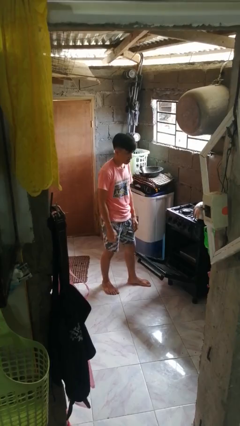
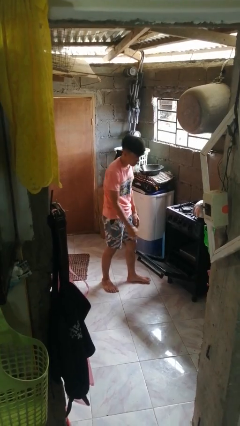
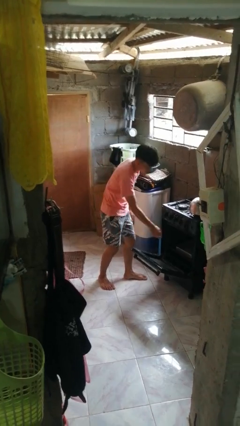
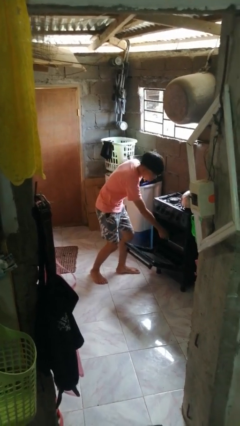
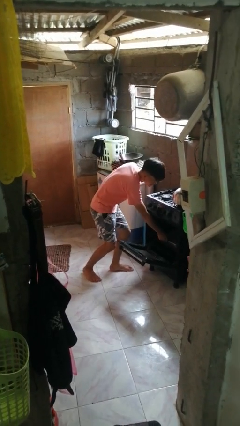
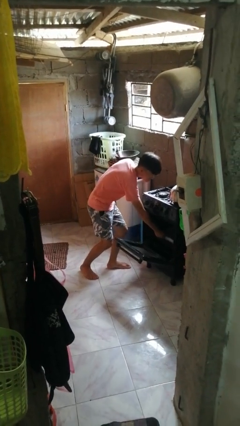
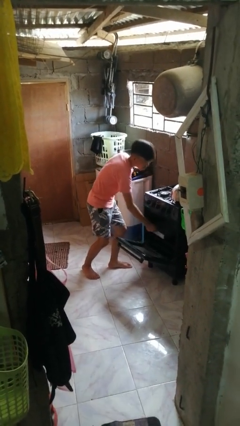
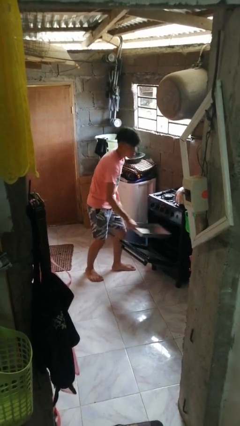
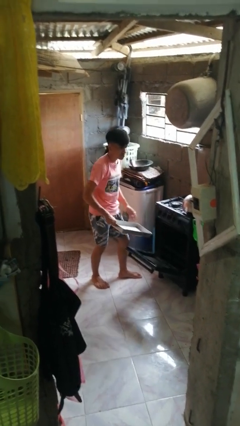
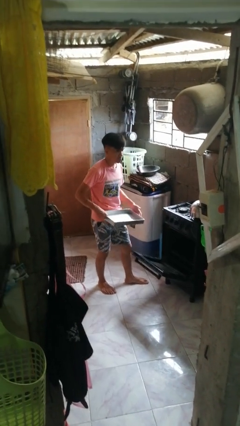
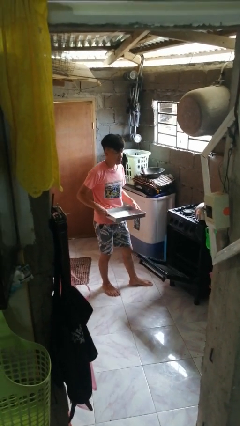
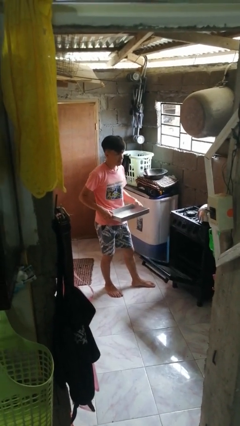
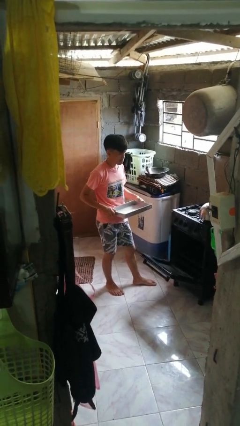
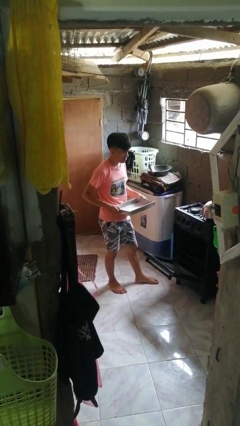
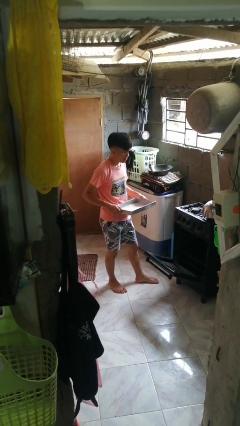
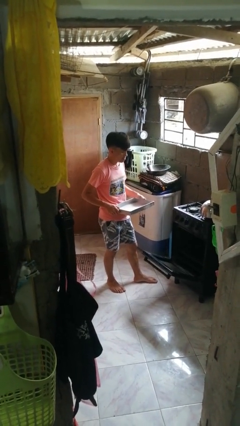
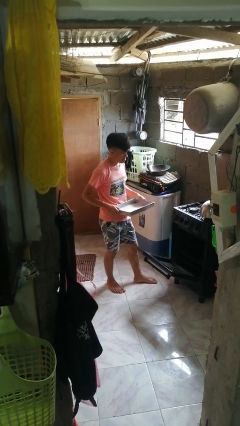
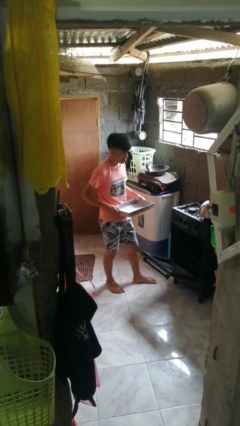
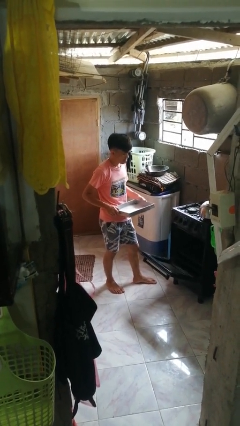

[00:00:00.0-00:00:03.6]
person takes object from oven

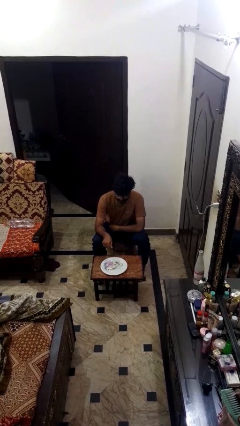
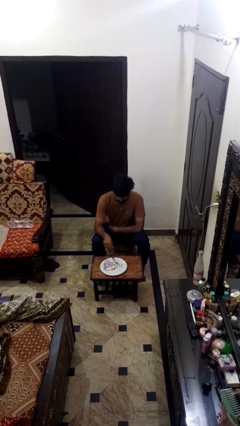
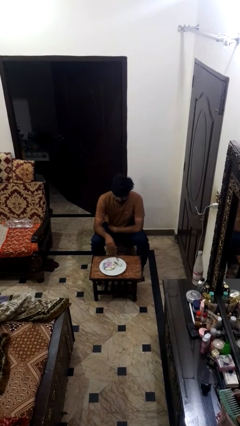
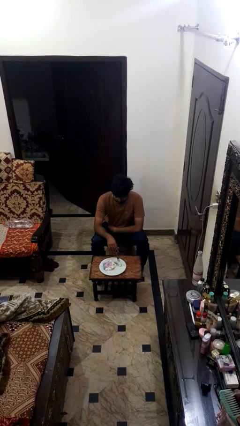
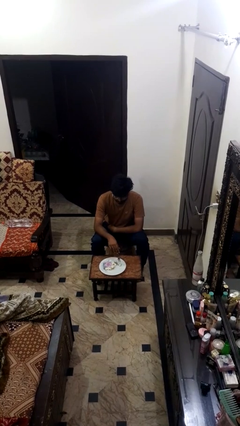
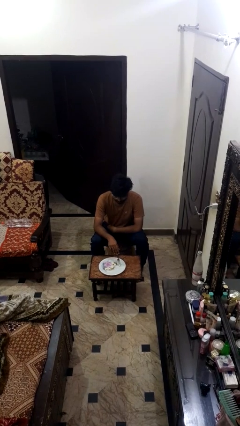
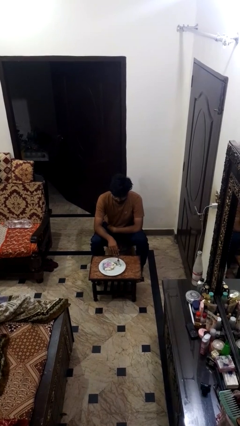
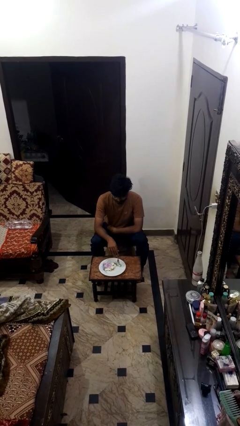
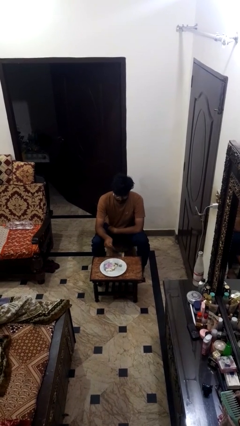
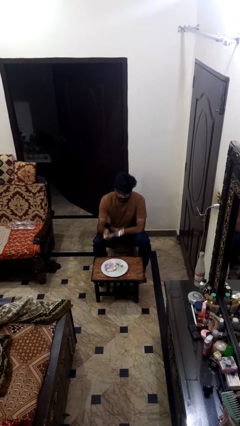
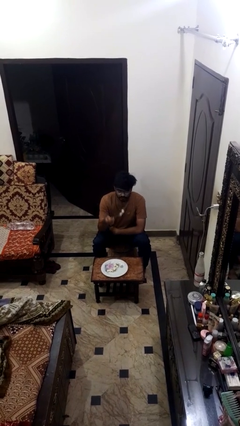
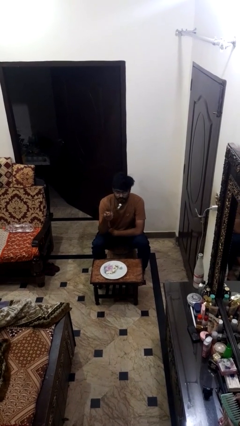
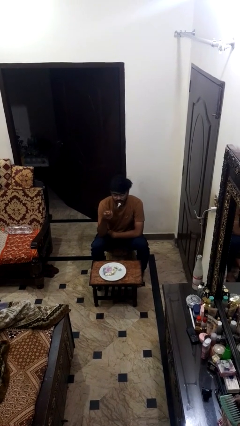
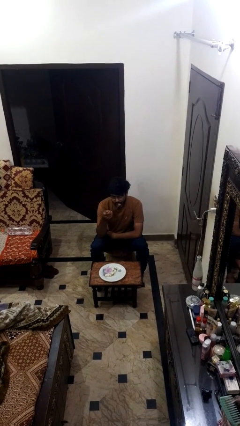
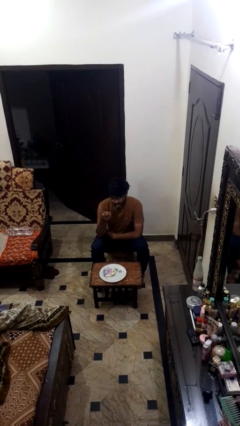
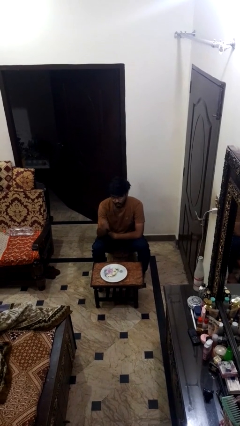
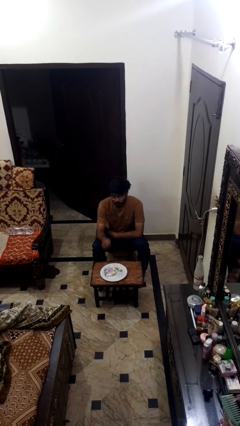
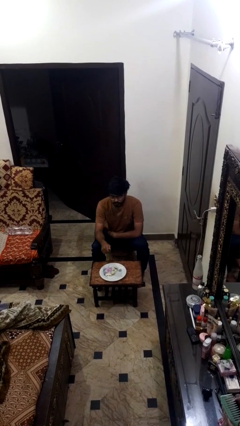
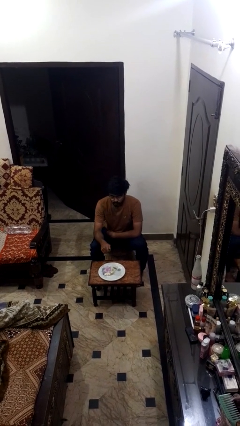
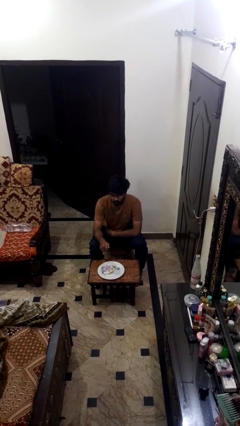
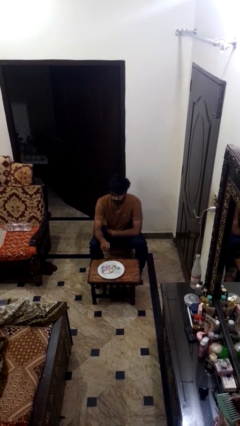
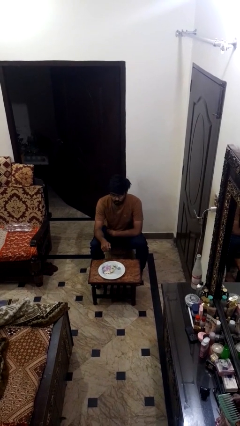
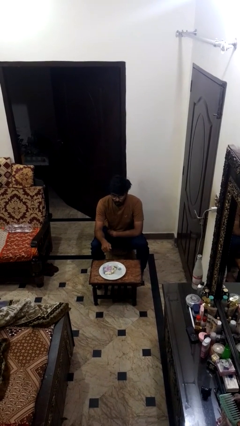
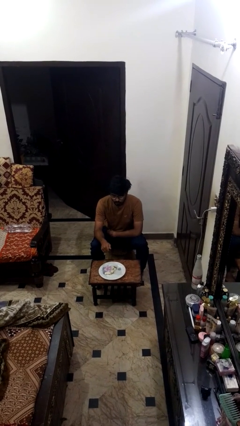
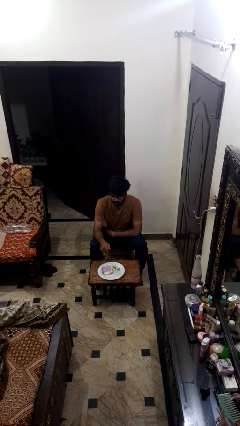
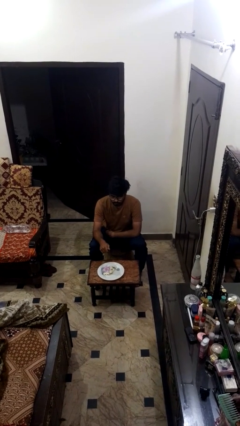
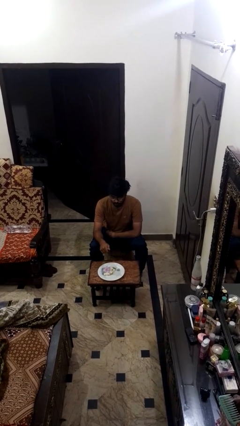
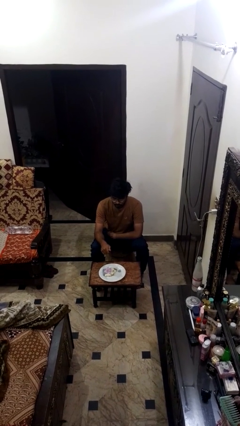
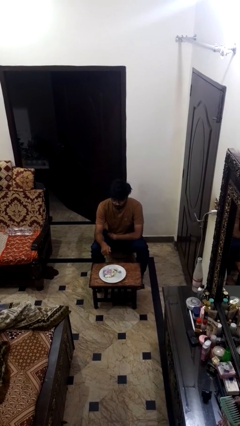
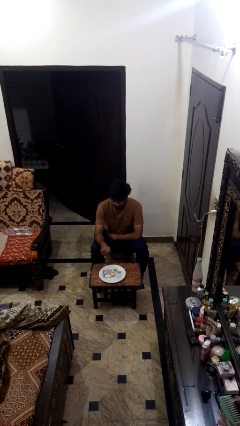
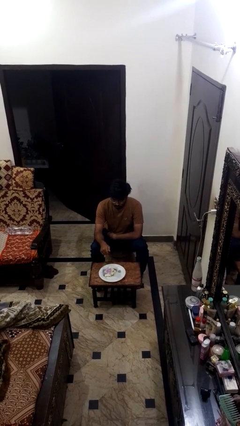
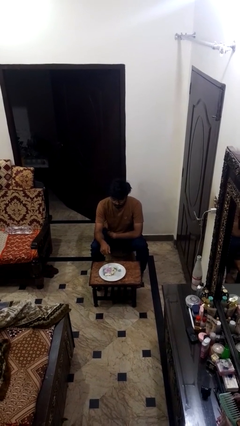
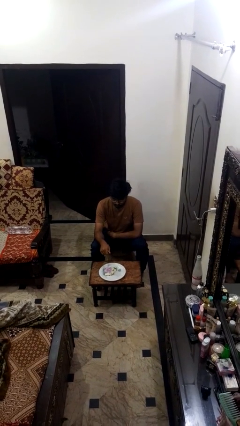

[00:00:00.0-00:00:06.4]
person eats with utensil

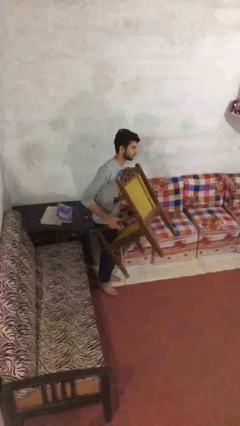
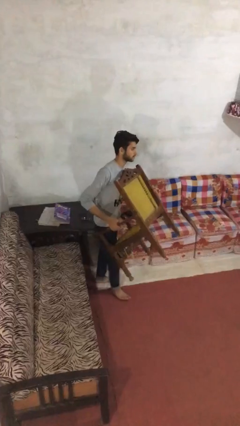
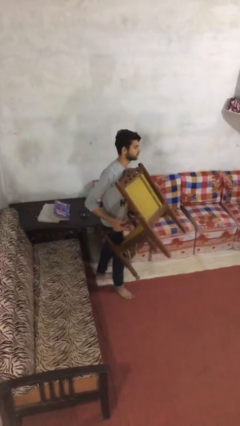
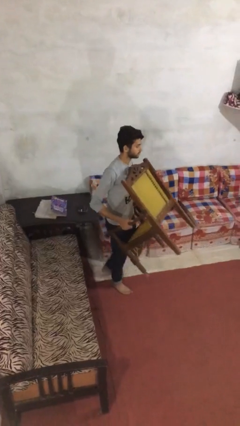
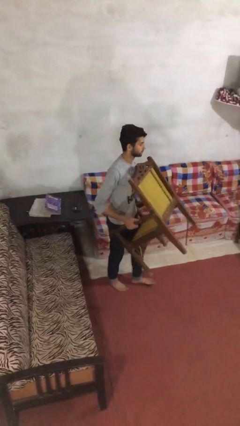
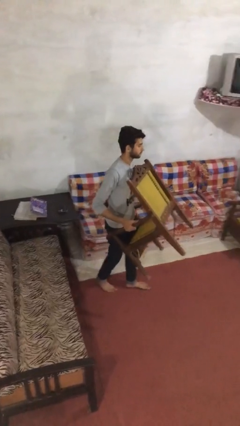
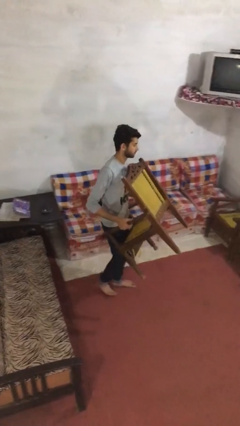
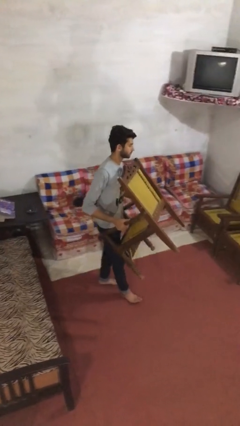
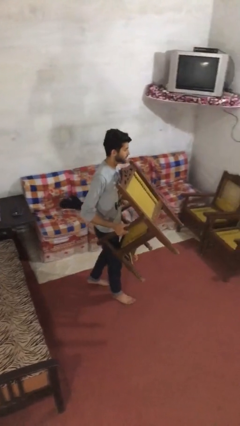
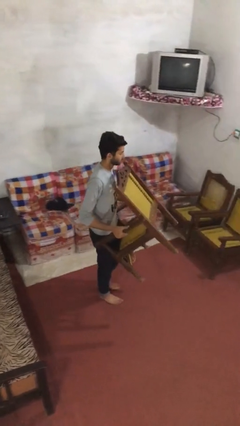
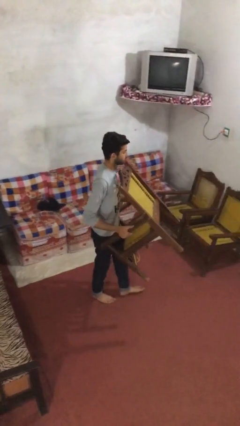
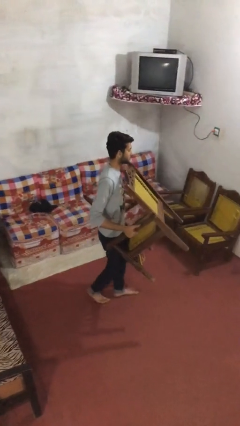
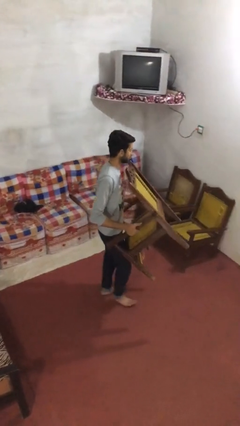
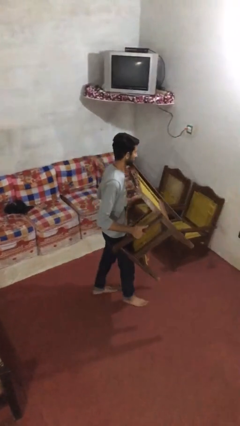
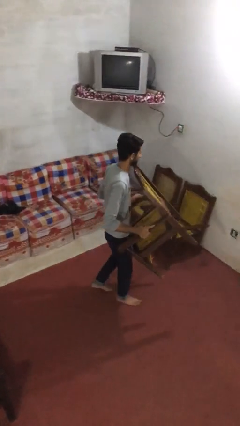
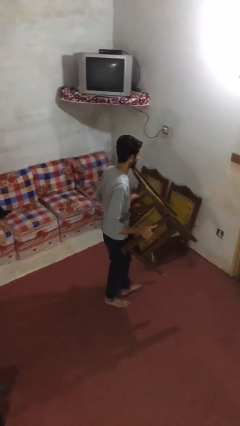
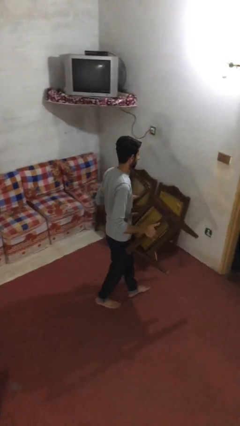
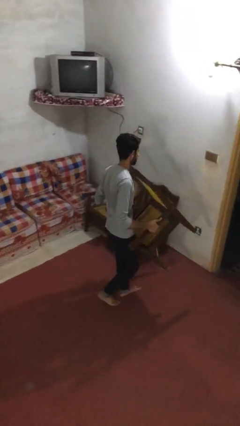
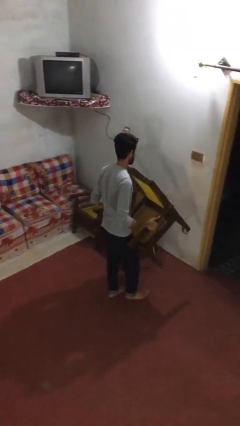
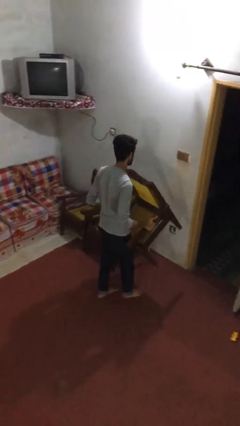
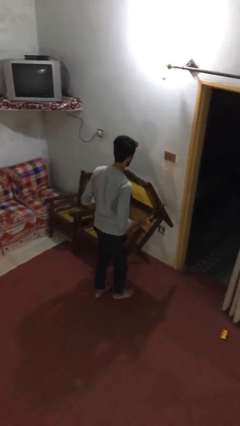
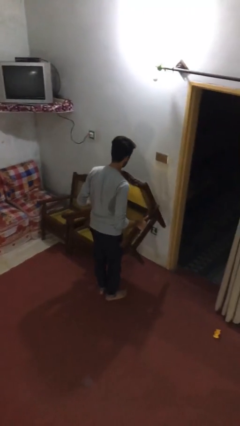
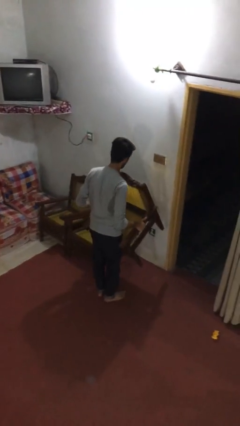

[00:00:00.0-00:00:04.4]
person carries heavy object

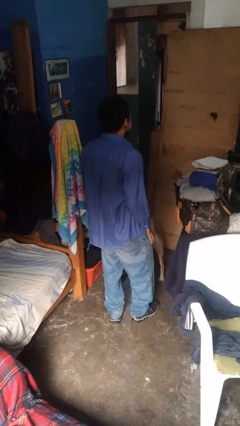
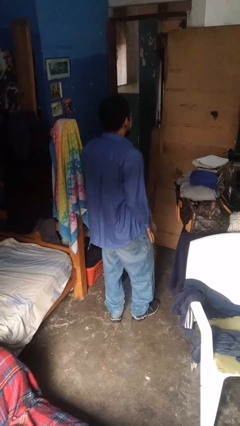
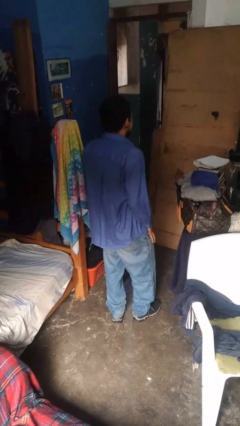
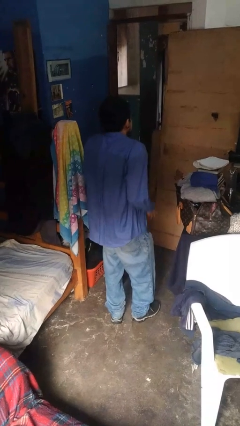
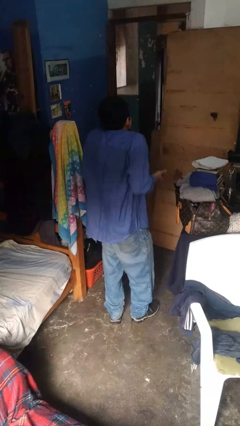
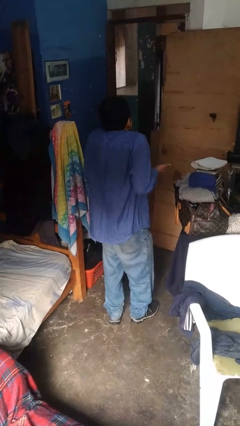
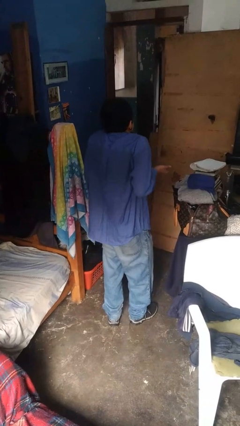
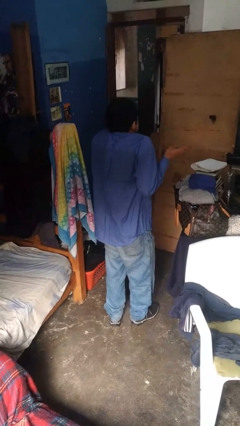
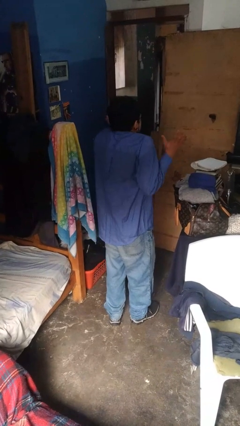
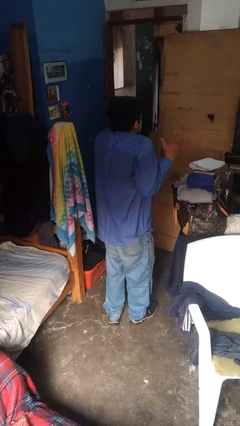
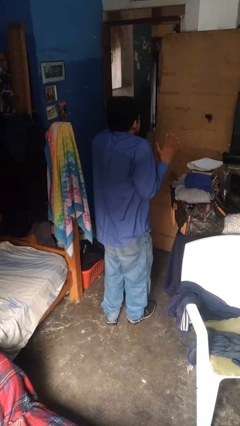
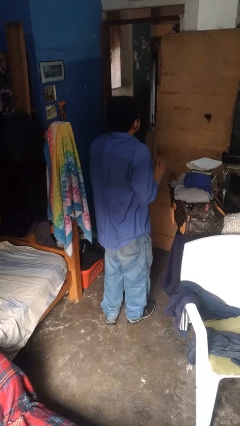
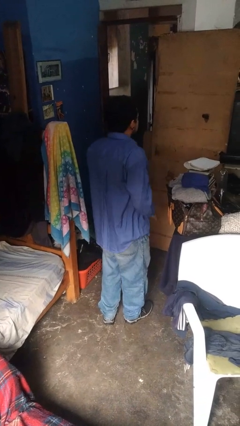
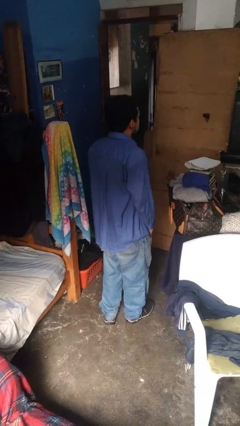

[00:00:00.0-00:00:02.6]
person shrugs

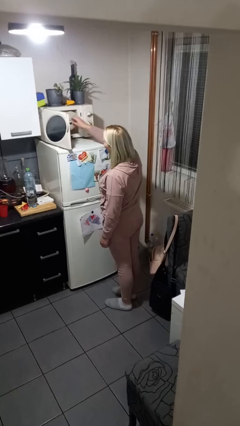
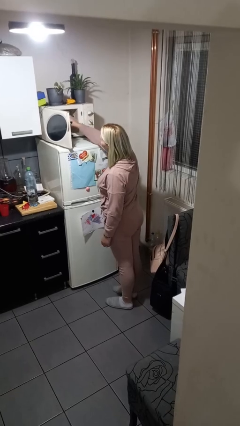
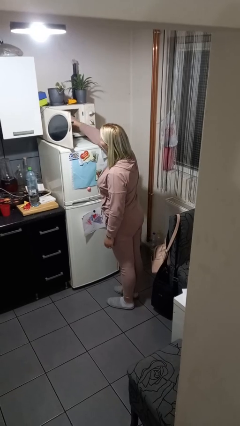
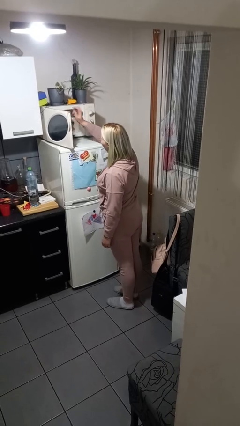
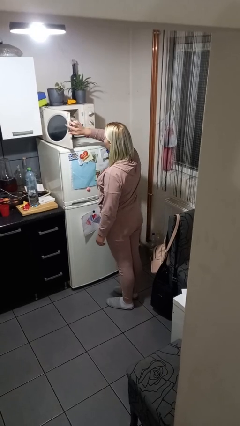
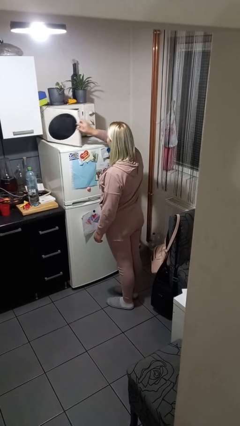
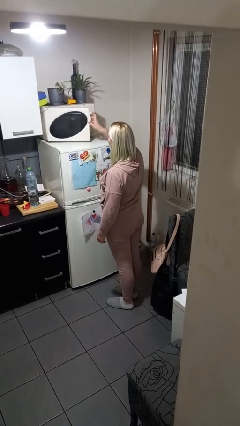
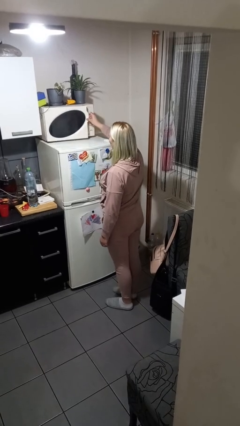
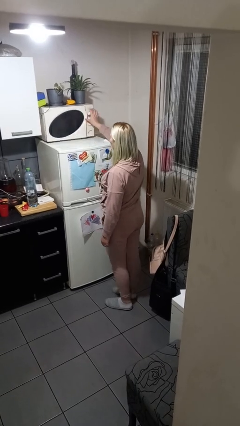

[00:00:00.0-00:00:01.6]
person puts object into microwave
